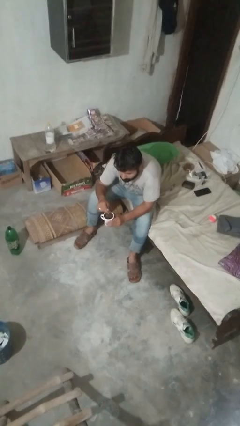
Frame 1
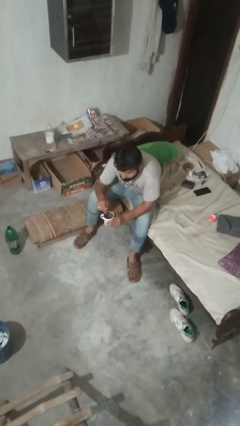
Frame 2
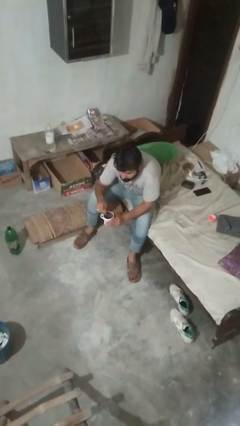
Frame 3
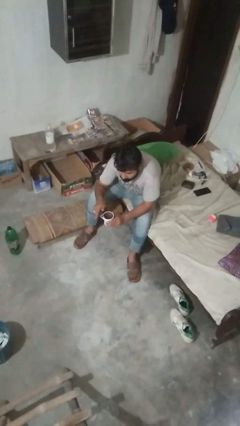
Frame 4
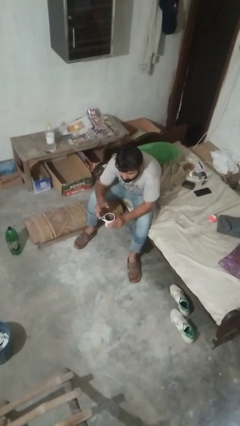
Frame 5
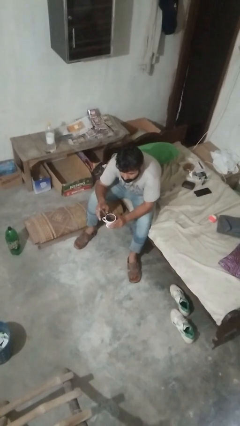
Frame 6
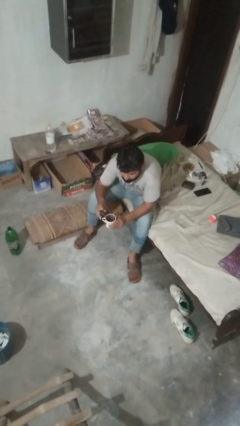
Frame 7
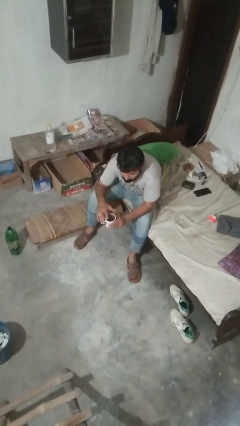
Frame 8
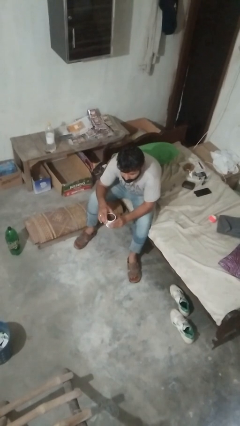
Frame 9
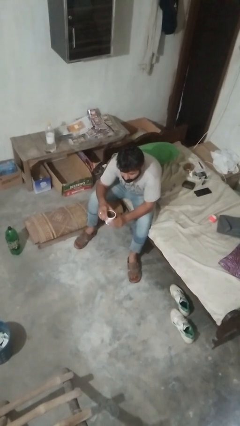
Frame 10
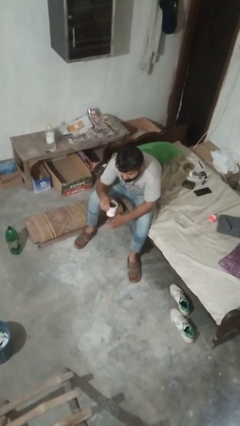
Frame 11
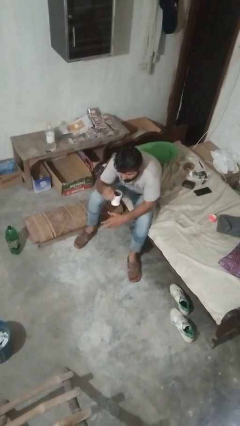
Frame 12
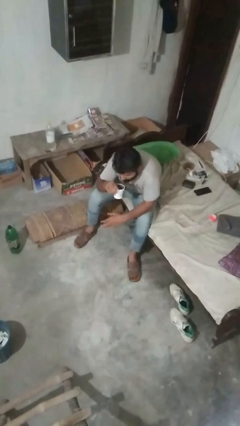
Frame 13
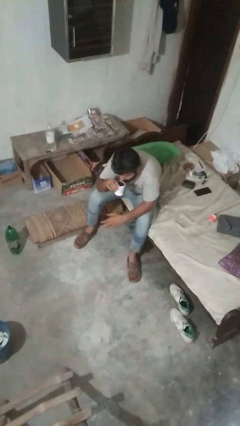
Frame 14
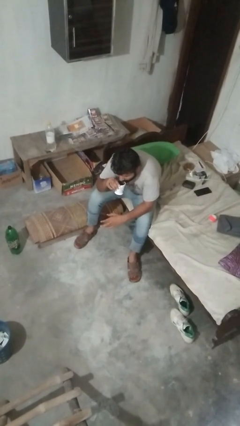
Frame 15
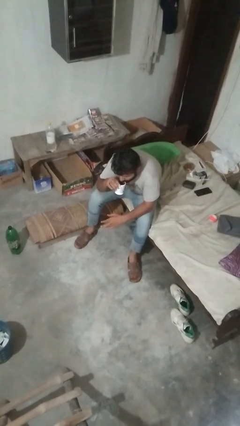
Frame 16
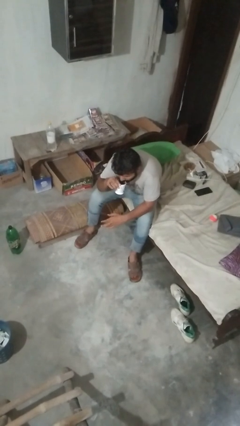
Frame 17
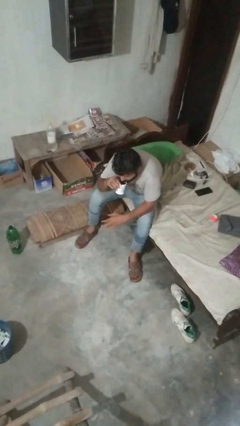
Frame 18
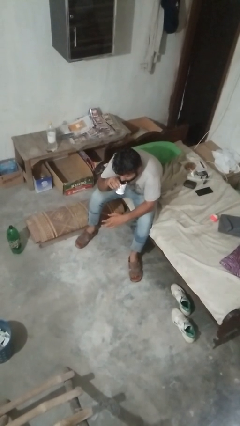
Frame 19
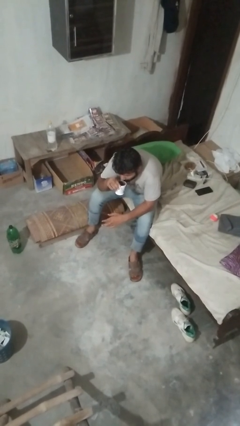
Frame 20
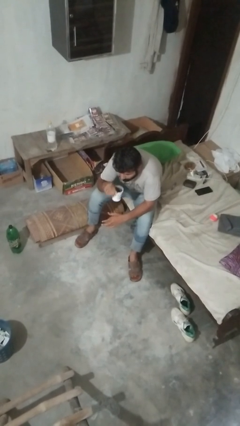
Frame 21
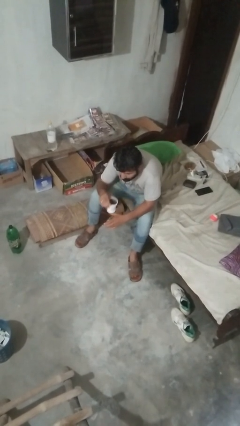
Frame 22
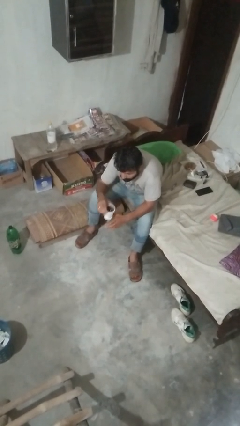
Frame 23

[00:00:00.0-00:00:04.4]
person drinks from mug

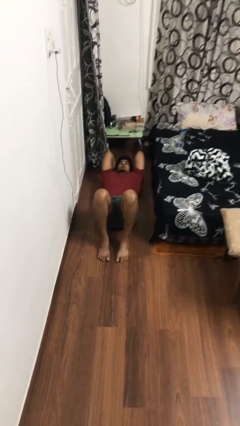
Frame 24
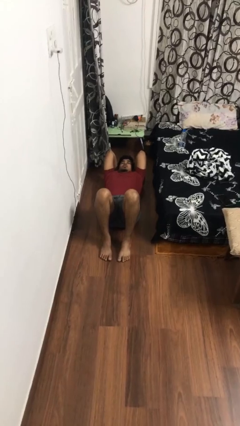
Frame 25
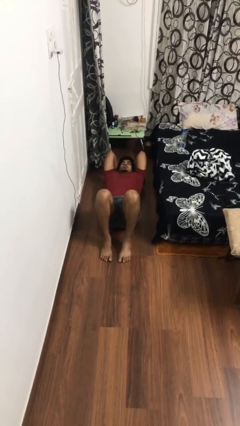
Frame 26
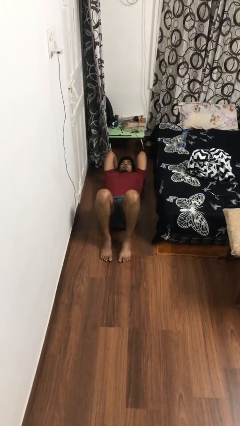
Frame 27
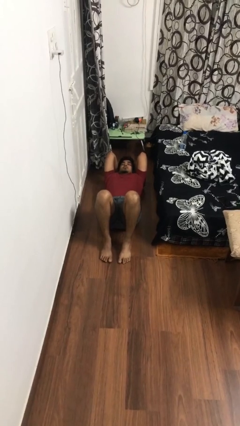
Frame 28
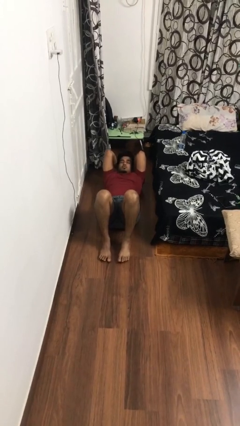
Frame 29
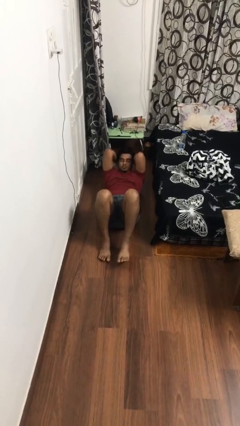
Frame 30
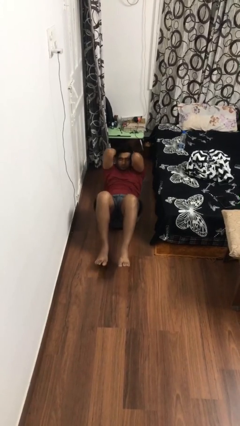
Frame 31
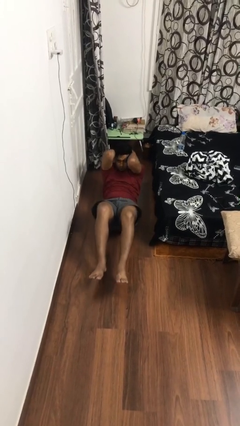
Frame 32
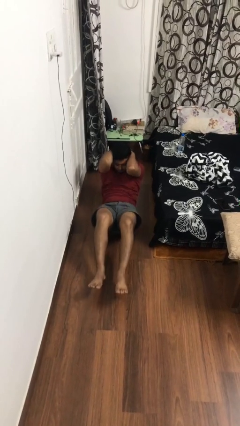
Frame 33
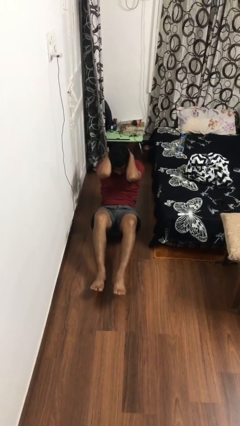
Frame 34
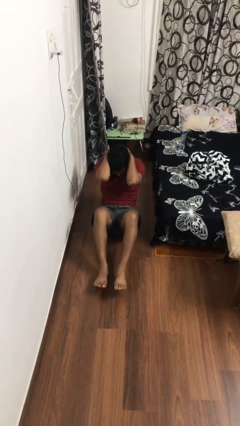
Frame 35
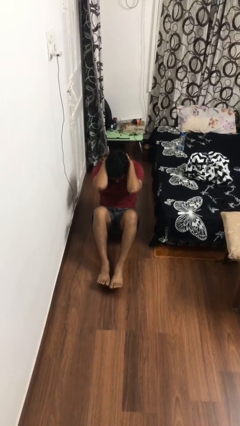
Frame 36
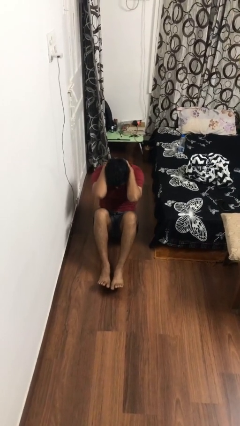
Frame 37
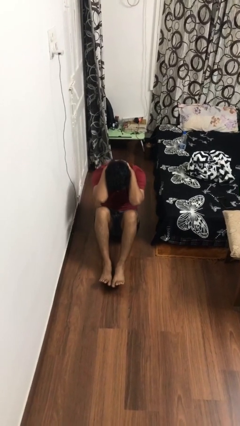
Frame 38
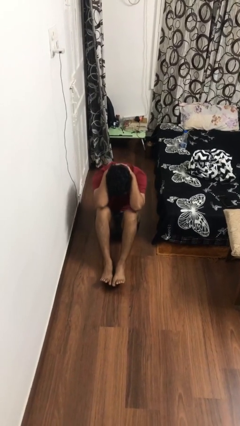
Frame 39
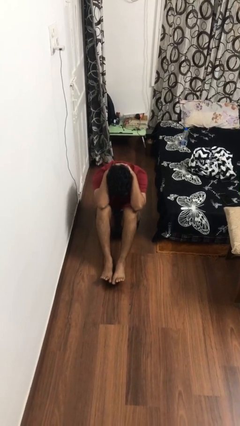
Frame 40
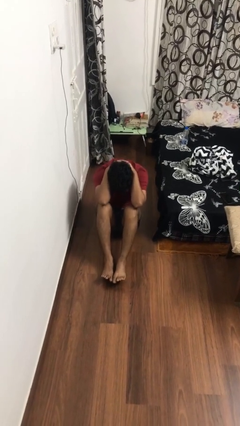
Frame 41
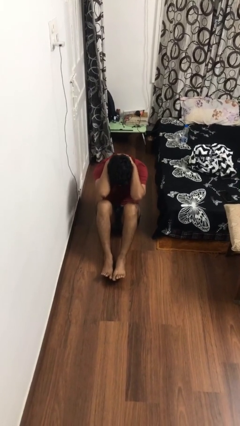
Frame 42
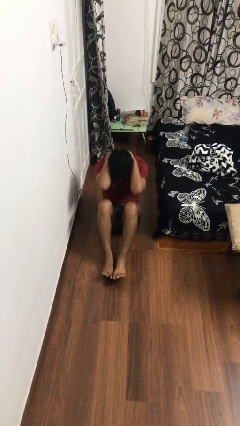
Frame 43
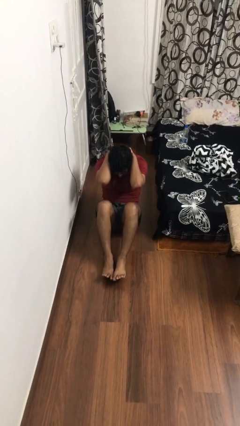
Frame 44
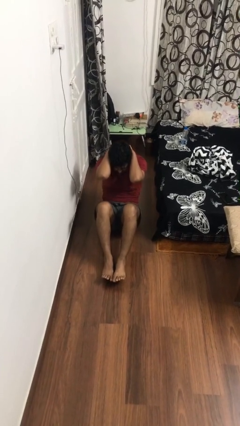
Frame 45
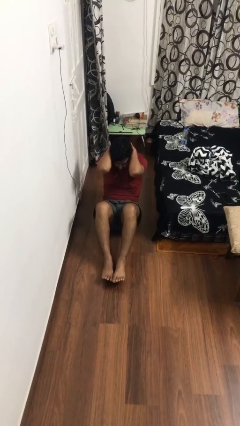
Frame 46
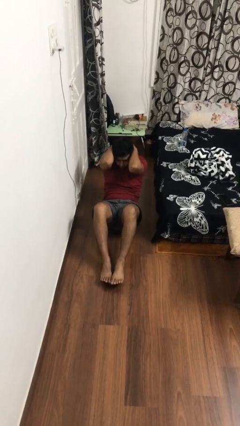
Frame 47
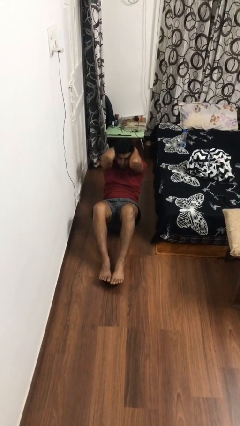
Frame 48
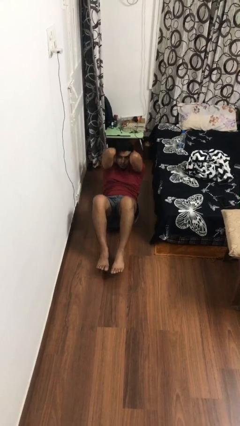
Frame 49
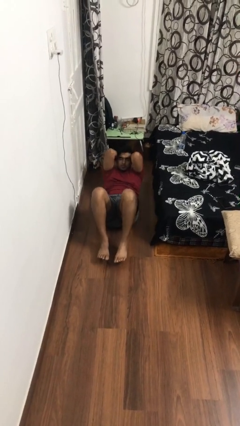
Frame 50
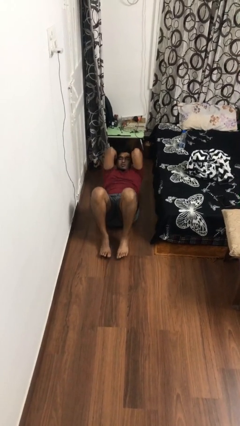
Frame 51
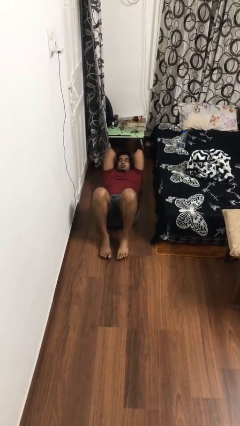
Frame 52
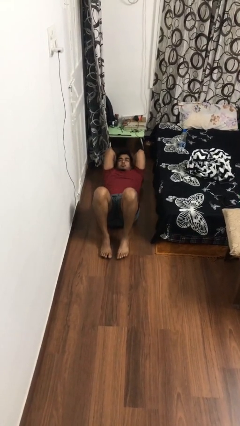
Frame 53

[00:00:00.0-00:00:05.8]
person exercises with situp

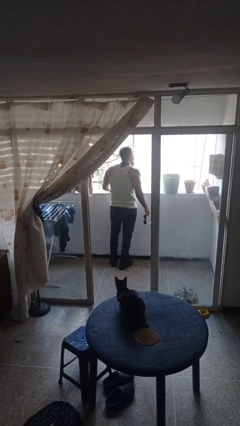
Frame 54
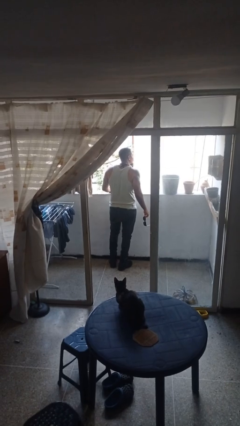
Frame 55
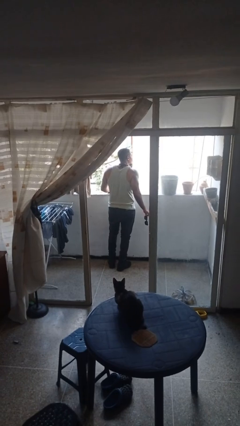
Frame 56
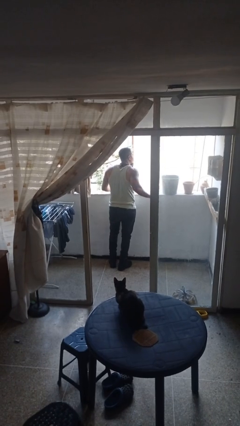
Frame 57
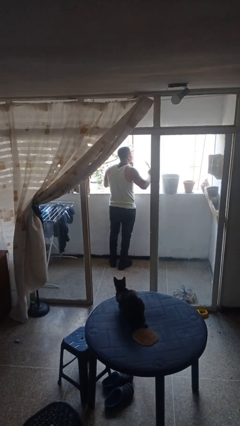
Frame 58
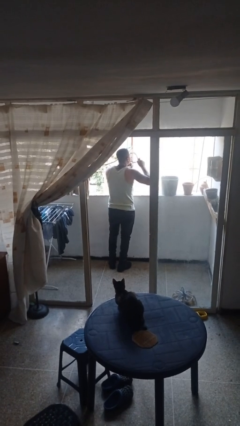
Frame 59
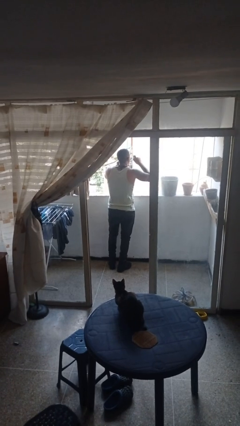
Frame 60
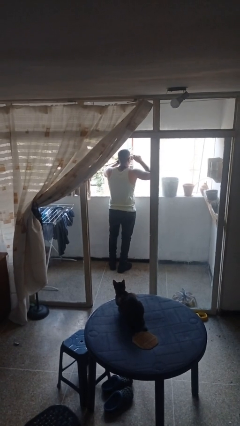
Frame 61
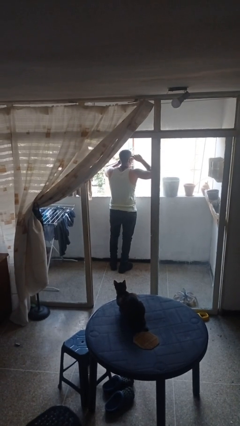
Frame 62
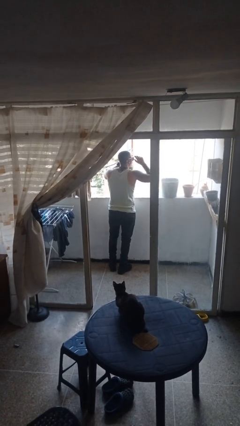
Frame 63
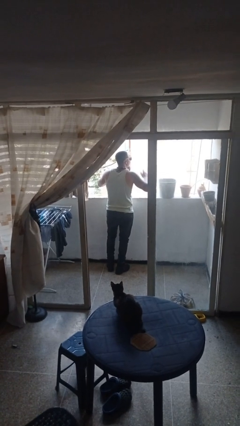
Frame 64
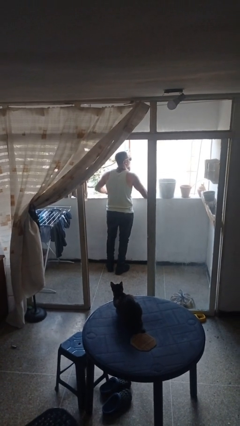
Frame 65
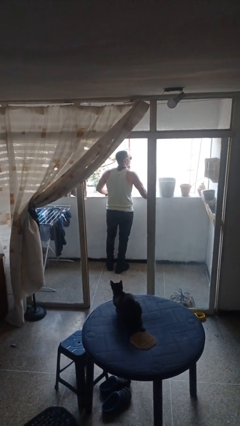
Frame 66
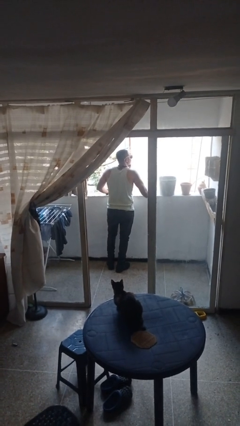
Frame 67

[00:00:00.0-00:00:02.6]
person puts on sunglasses

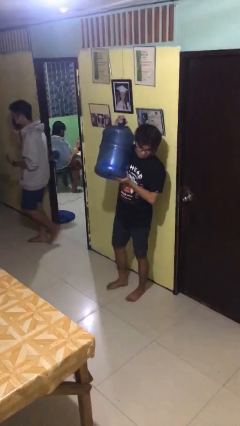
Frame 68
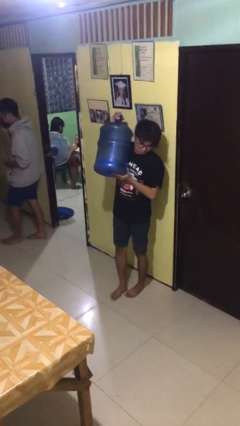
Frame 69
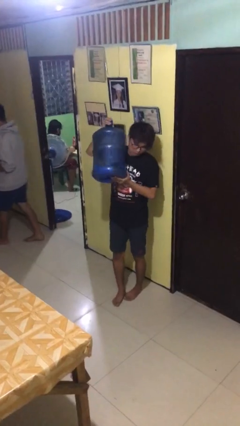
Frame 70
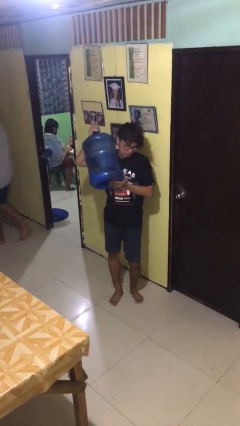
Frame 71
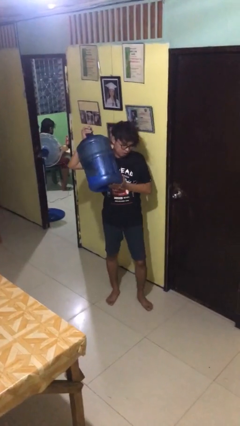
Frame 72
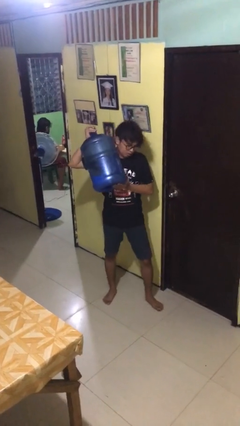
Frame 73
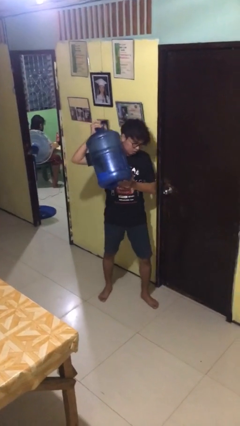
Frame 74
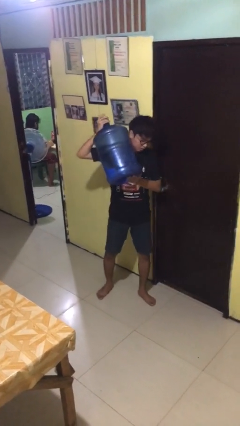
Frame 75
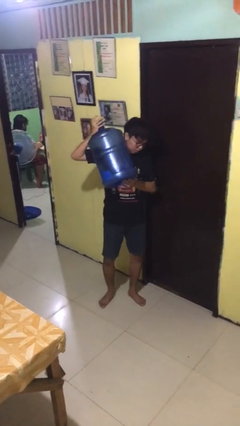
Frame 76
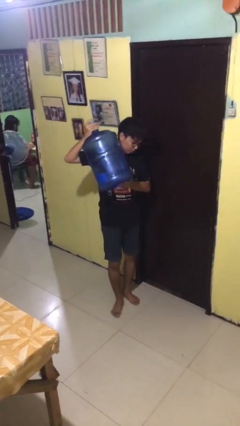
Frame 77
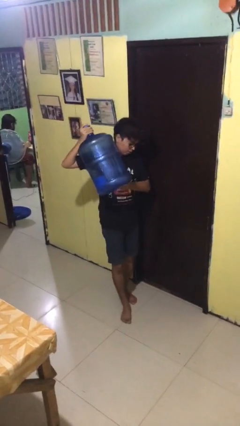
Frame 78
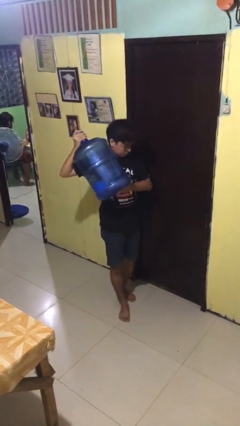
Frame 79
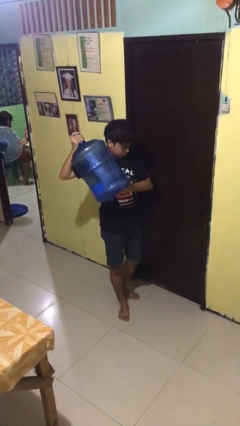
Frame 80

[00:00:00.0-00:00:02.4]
person carries heavy object

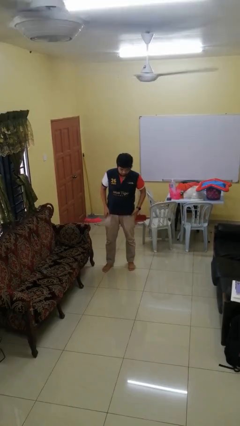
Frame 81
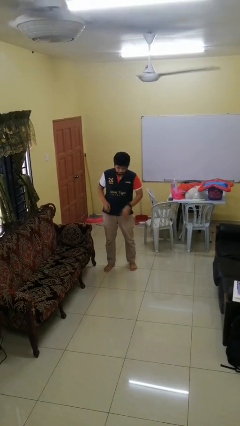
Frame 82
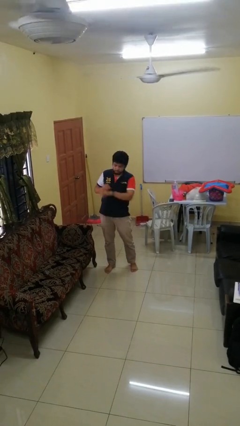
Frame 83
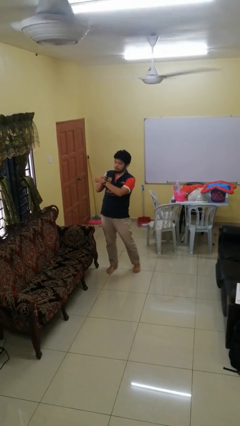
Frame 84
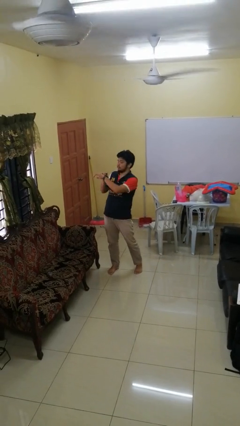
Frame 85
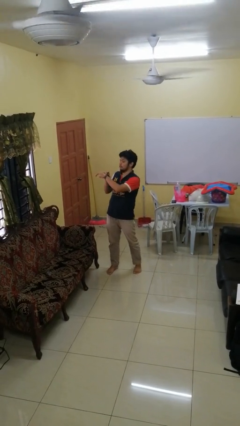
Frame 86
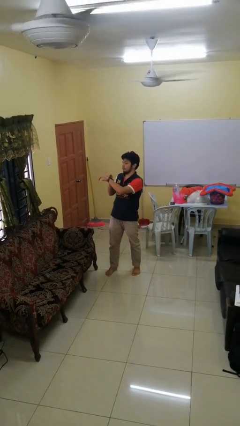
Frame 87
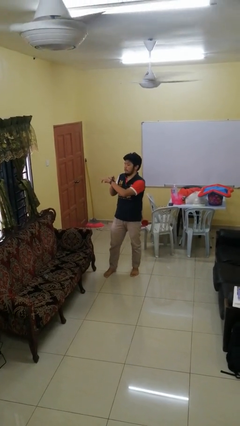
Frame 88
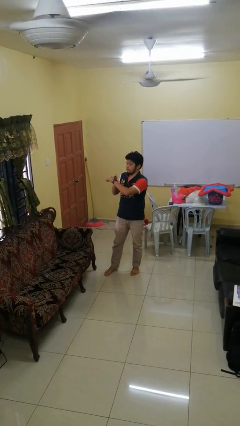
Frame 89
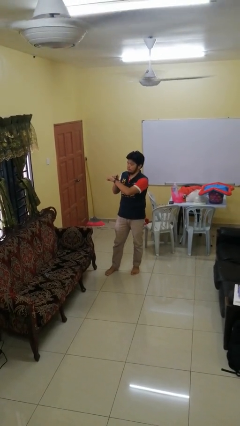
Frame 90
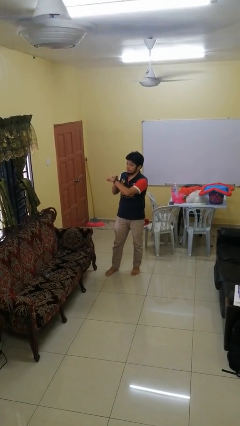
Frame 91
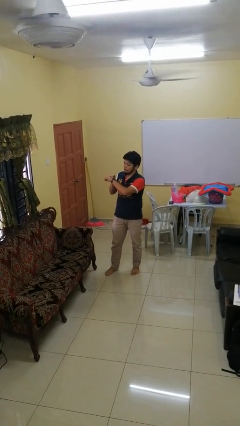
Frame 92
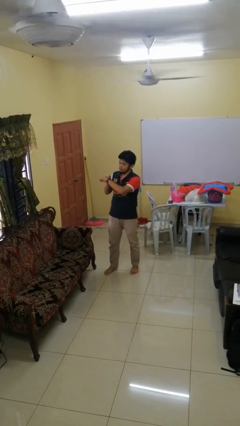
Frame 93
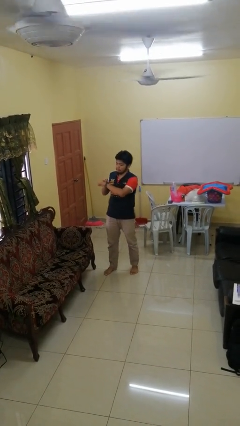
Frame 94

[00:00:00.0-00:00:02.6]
person looks at wristwatch
